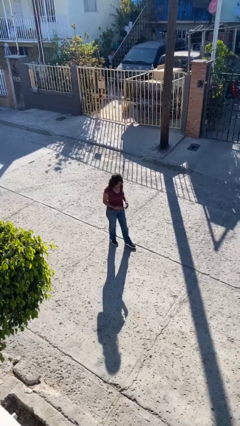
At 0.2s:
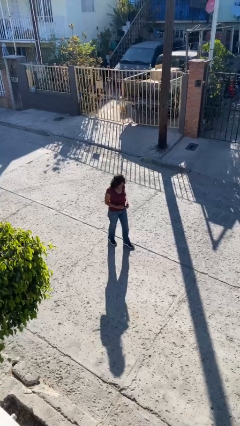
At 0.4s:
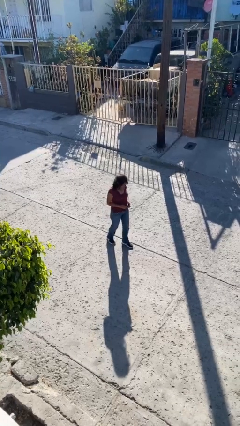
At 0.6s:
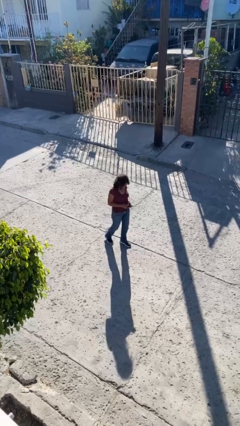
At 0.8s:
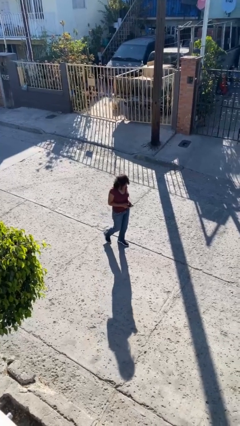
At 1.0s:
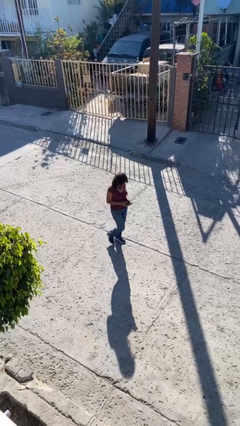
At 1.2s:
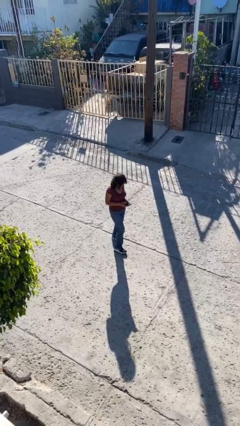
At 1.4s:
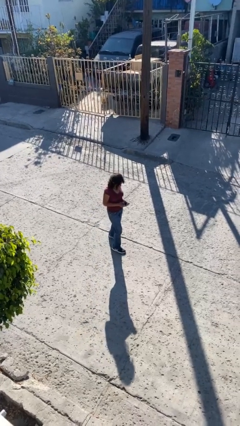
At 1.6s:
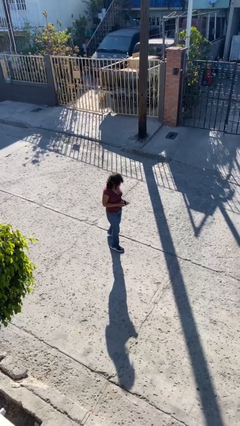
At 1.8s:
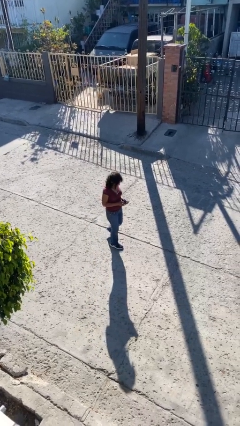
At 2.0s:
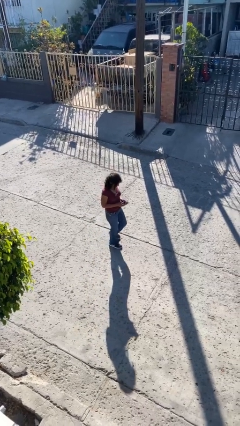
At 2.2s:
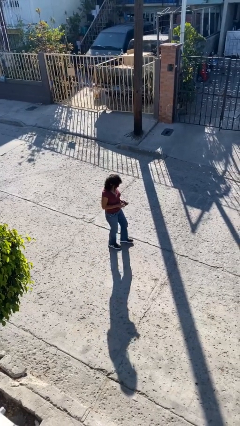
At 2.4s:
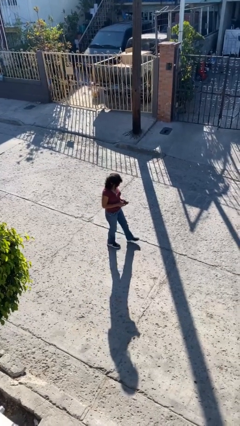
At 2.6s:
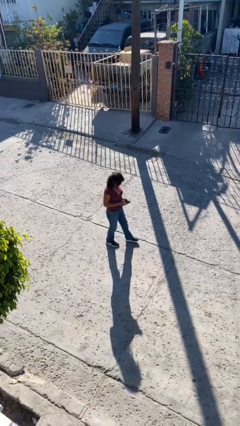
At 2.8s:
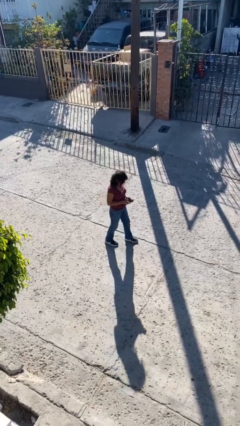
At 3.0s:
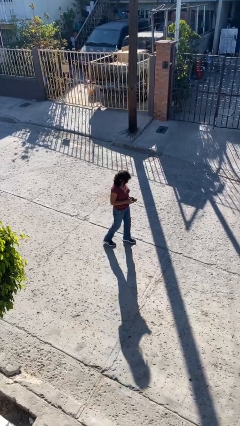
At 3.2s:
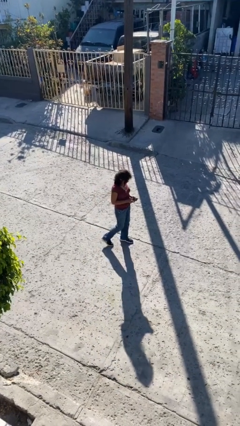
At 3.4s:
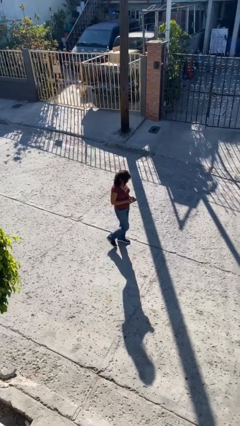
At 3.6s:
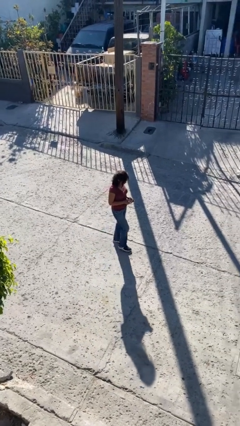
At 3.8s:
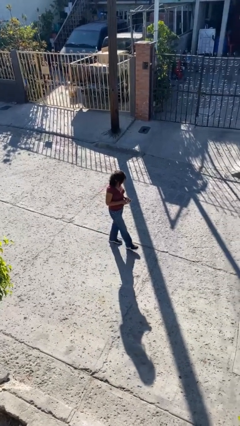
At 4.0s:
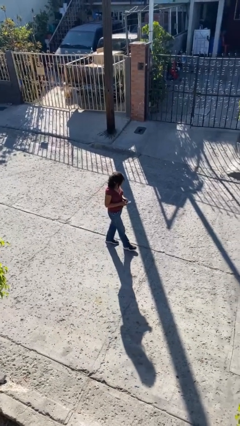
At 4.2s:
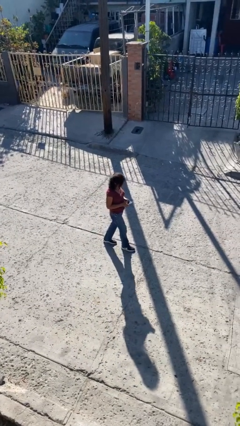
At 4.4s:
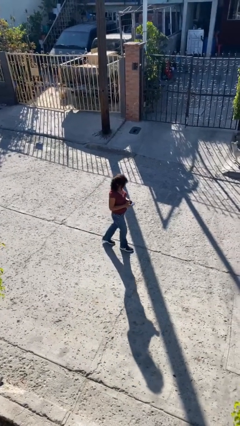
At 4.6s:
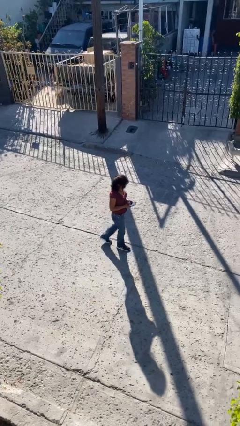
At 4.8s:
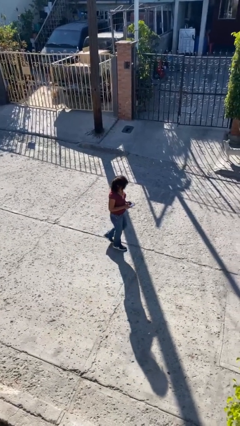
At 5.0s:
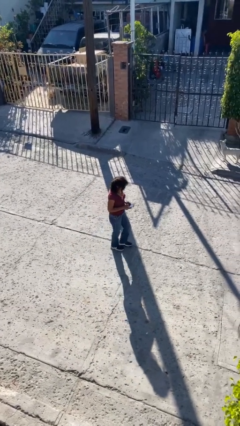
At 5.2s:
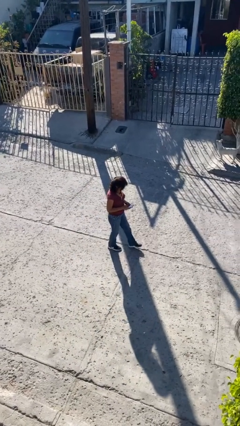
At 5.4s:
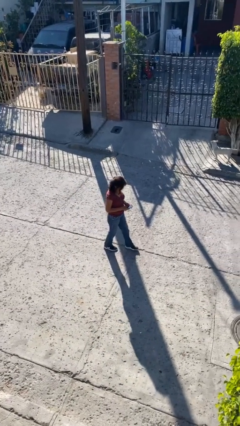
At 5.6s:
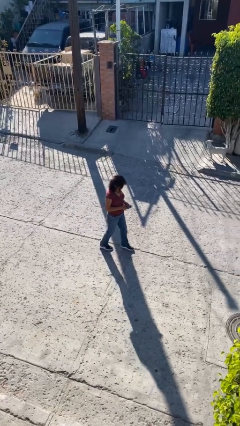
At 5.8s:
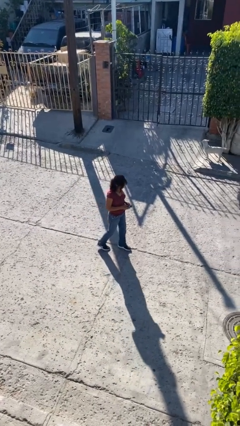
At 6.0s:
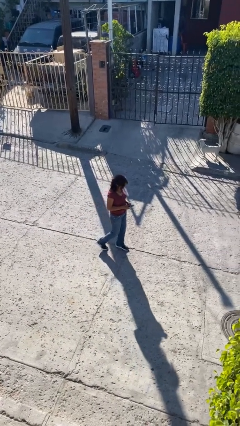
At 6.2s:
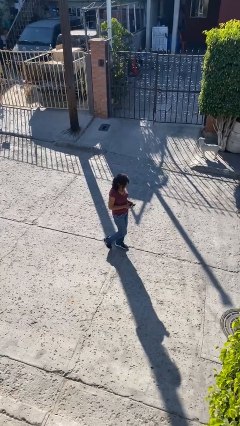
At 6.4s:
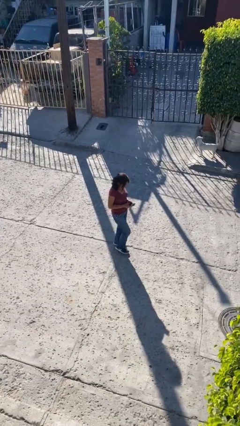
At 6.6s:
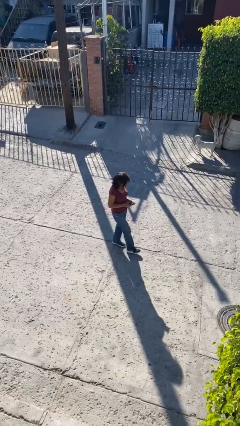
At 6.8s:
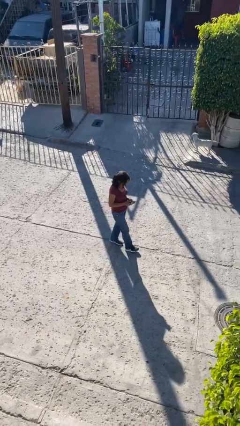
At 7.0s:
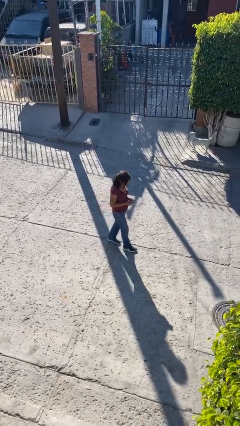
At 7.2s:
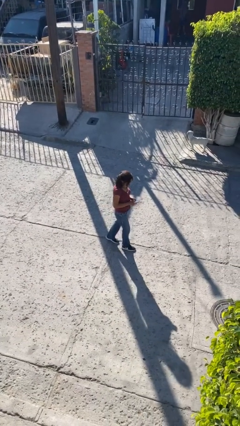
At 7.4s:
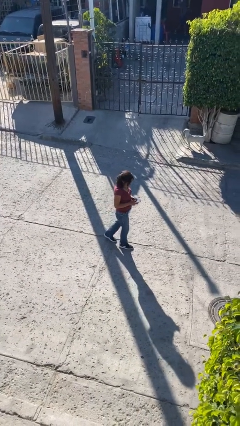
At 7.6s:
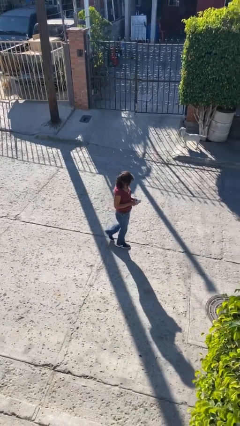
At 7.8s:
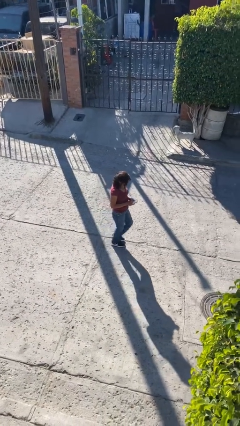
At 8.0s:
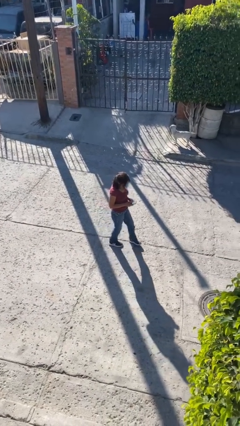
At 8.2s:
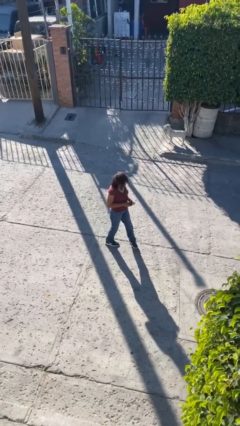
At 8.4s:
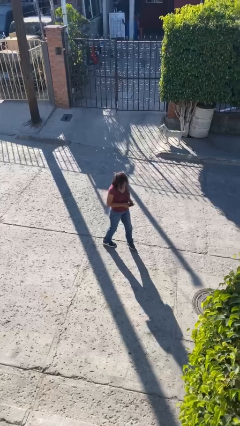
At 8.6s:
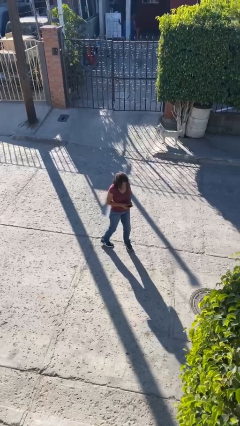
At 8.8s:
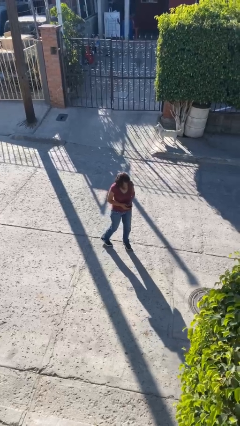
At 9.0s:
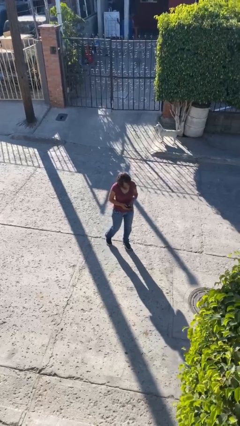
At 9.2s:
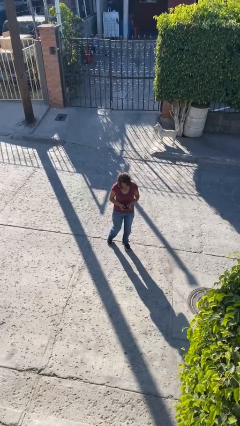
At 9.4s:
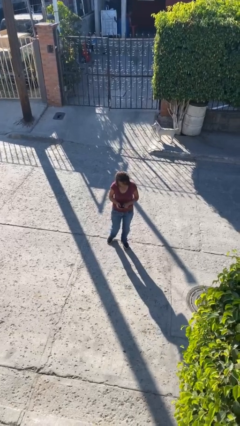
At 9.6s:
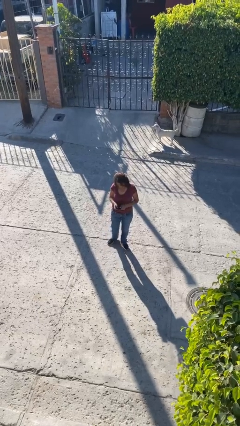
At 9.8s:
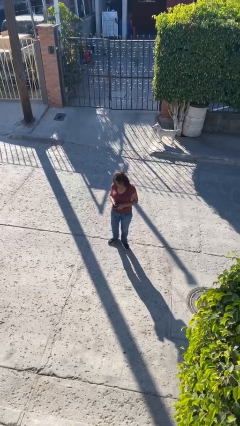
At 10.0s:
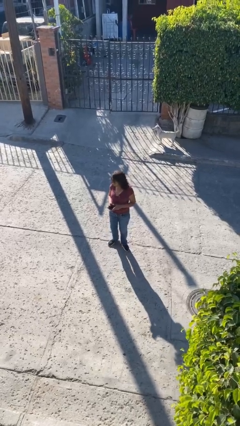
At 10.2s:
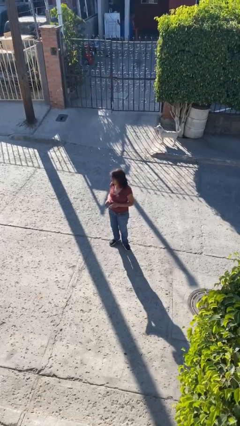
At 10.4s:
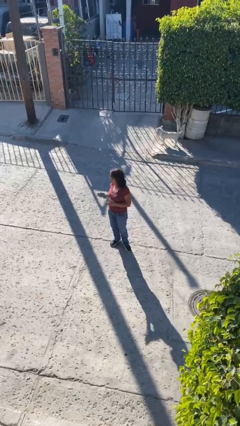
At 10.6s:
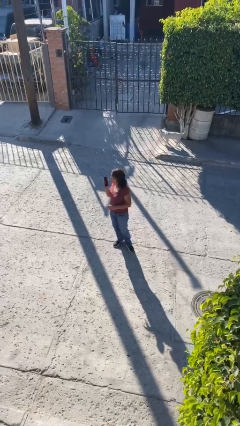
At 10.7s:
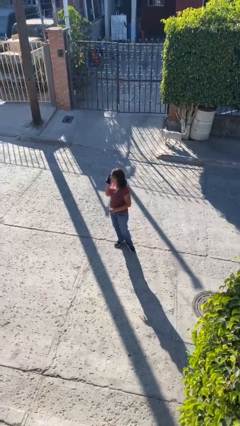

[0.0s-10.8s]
person texts on phone

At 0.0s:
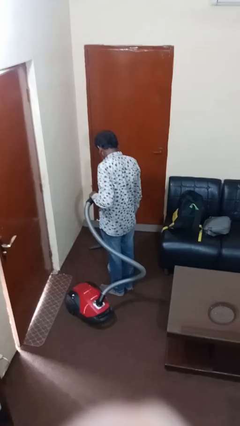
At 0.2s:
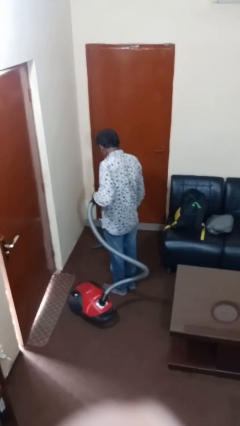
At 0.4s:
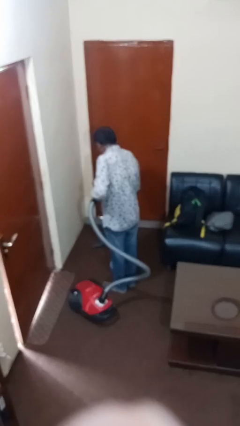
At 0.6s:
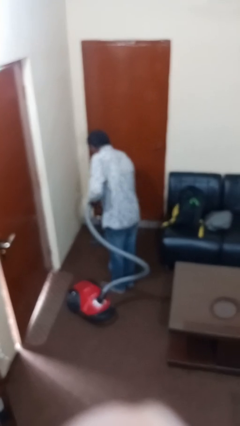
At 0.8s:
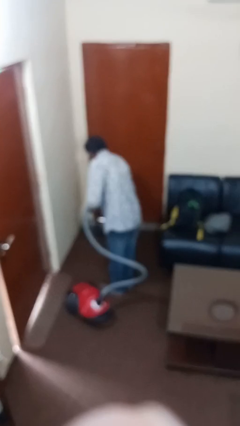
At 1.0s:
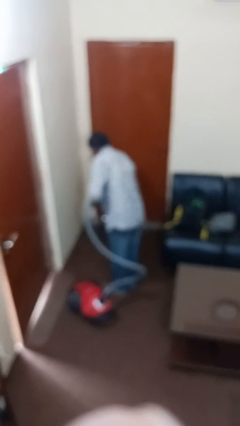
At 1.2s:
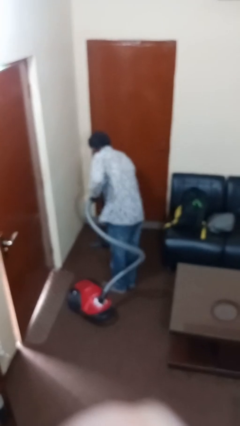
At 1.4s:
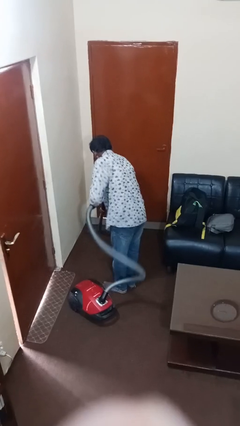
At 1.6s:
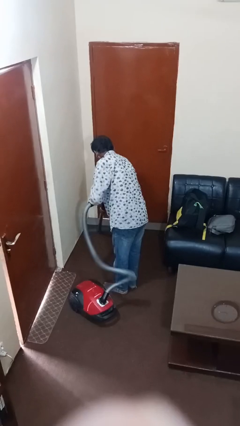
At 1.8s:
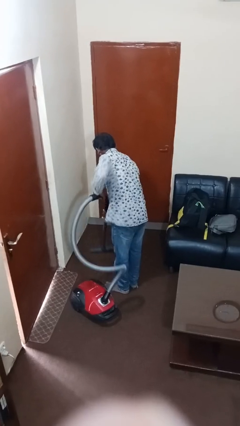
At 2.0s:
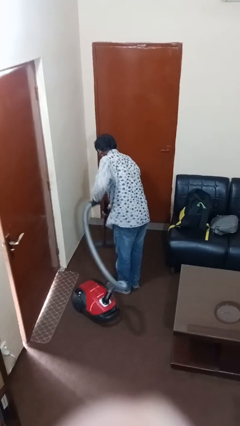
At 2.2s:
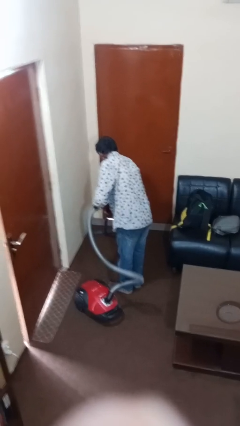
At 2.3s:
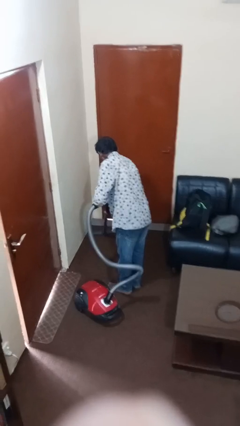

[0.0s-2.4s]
person vacuums carpet

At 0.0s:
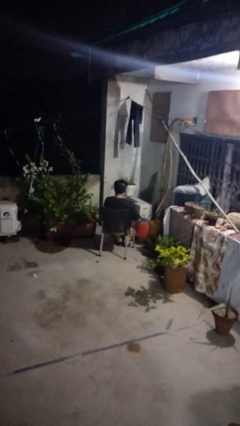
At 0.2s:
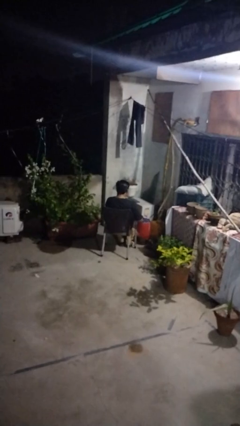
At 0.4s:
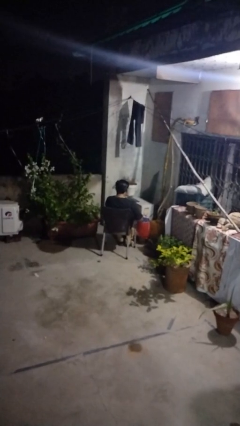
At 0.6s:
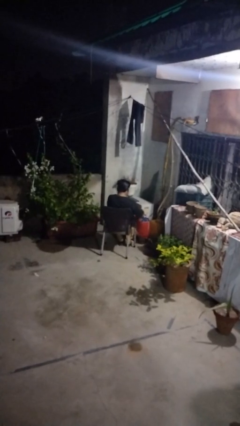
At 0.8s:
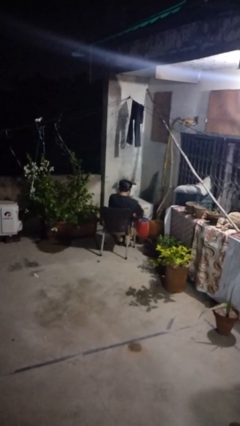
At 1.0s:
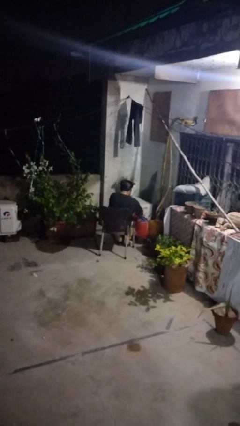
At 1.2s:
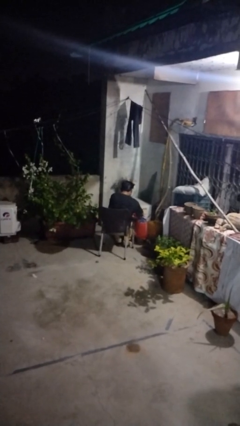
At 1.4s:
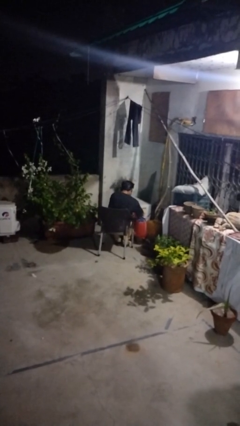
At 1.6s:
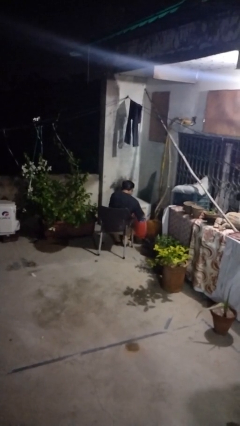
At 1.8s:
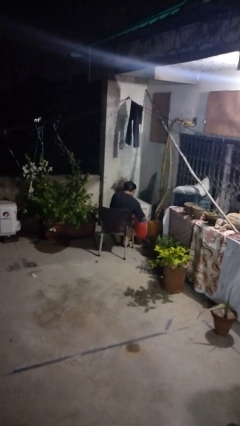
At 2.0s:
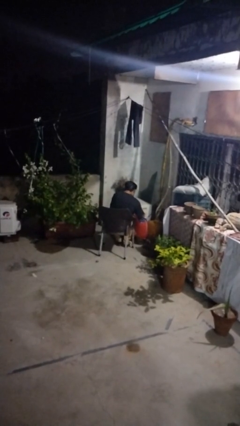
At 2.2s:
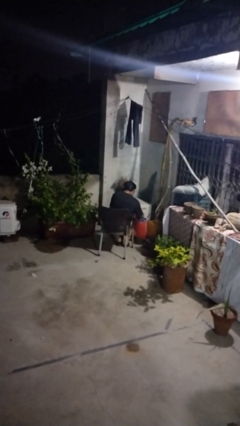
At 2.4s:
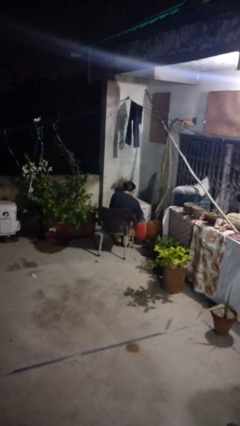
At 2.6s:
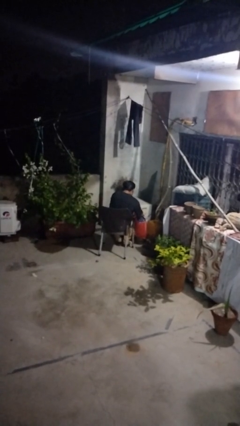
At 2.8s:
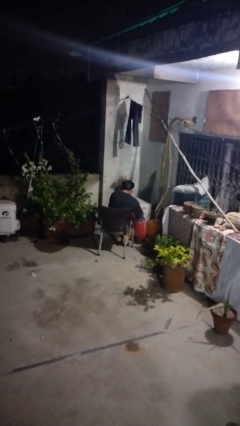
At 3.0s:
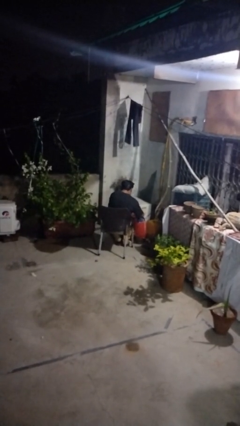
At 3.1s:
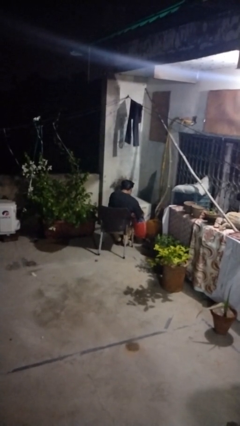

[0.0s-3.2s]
person searches in bag

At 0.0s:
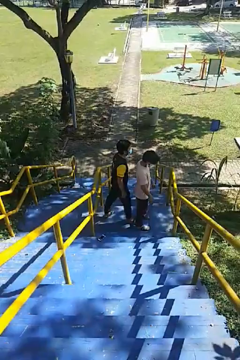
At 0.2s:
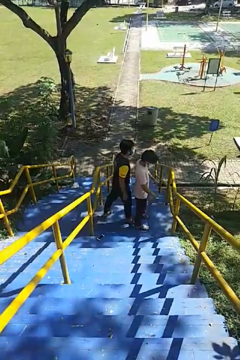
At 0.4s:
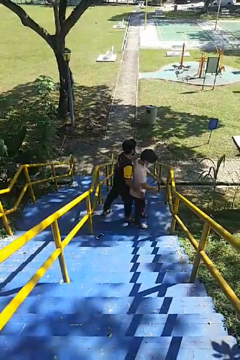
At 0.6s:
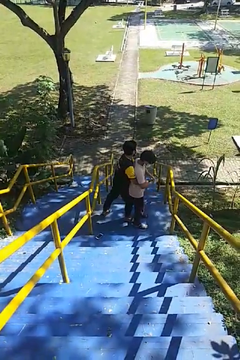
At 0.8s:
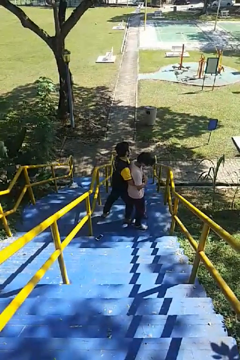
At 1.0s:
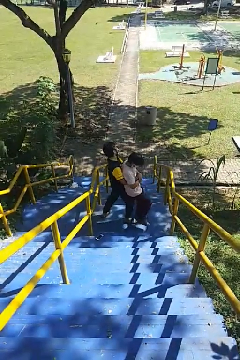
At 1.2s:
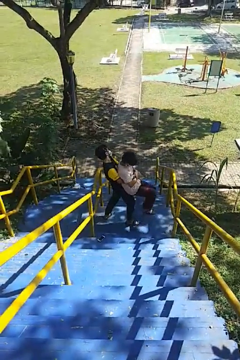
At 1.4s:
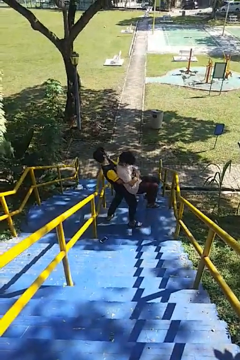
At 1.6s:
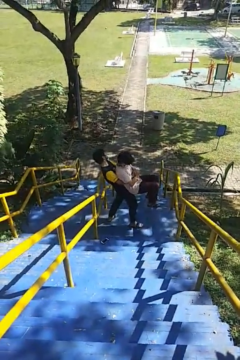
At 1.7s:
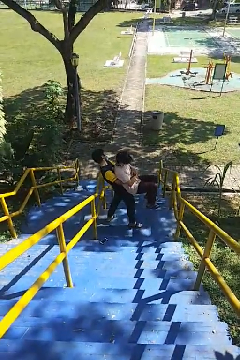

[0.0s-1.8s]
person picks up person

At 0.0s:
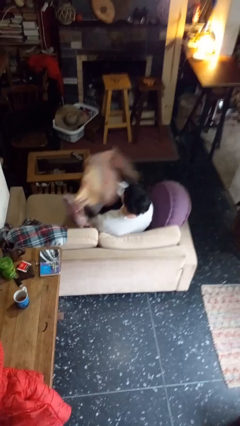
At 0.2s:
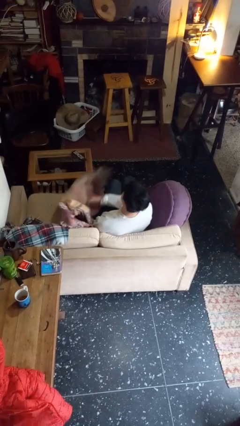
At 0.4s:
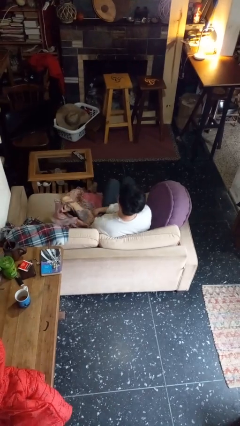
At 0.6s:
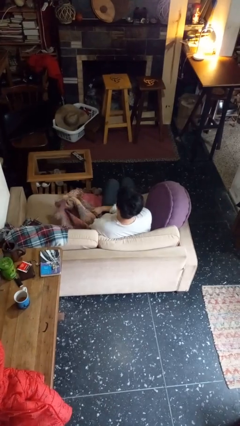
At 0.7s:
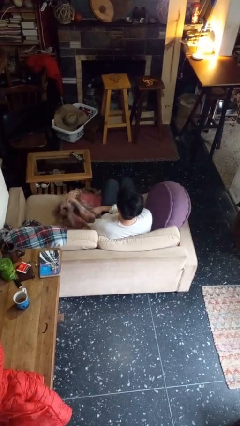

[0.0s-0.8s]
person uncovers with blanket
